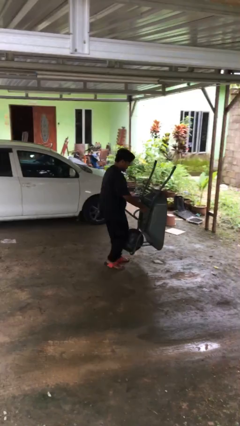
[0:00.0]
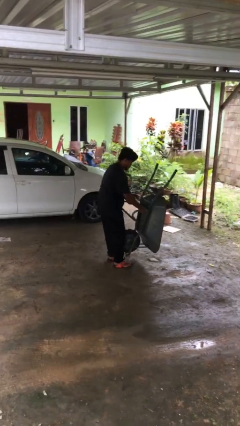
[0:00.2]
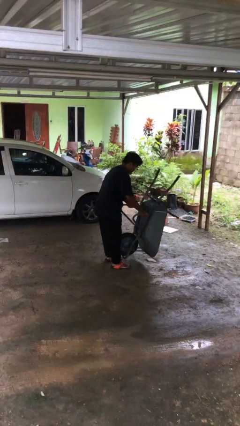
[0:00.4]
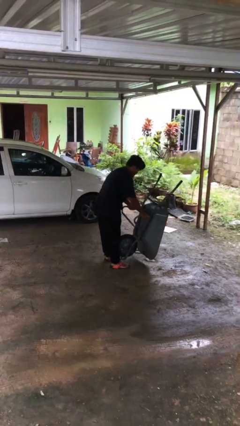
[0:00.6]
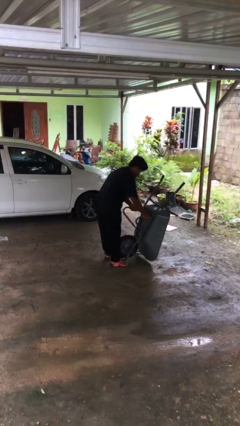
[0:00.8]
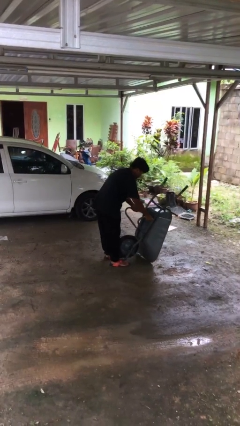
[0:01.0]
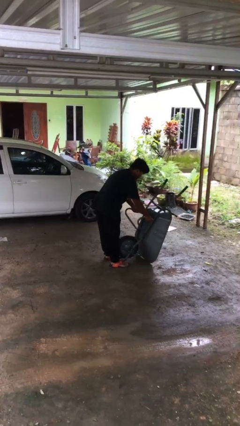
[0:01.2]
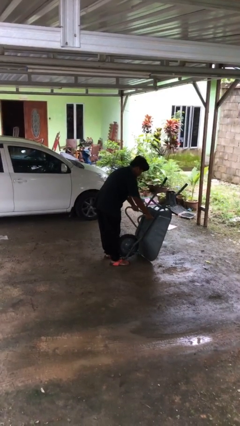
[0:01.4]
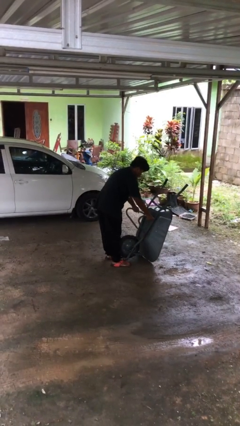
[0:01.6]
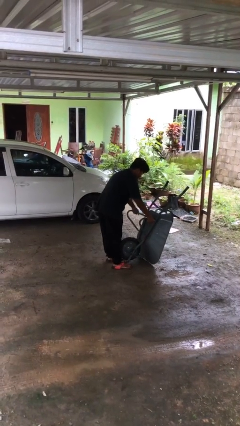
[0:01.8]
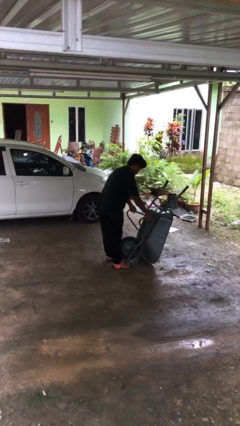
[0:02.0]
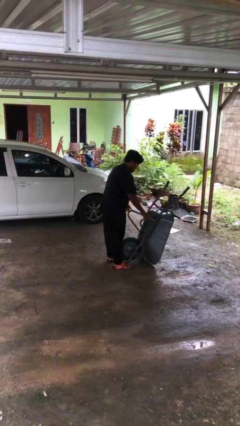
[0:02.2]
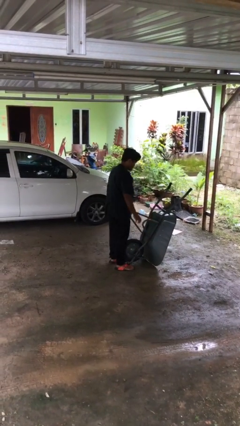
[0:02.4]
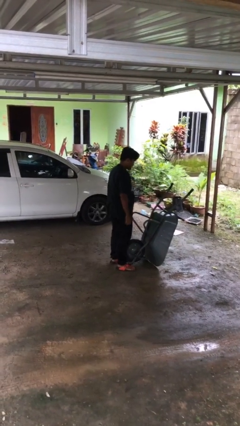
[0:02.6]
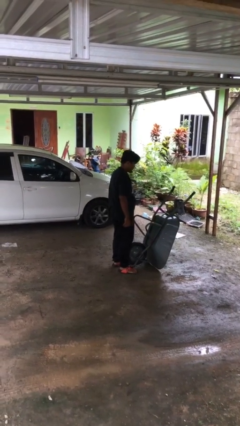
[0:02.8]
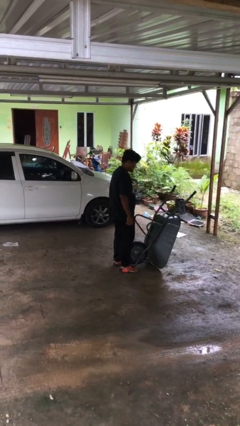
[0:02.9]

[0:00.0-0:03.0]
person puts down object on floor

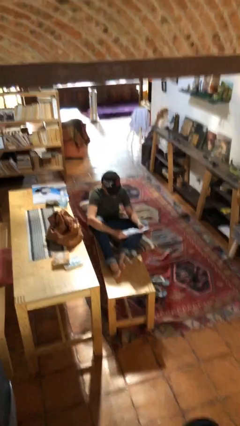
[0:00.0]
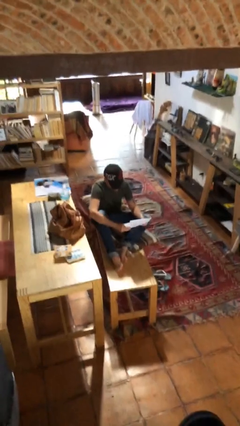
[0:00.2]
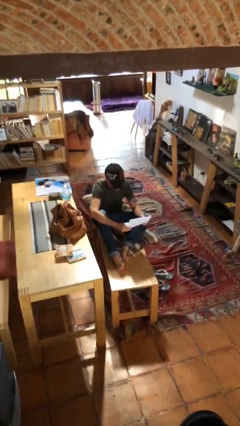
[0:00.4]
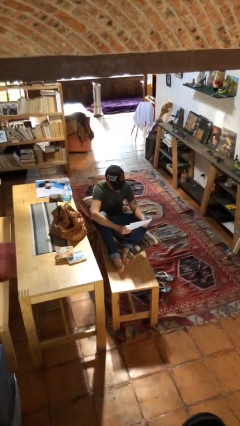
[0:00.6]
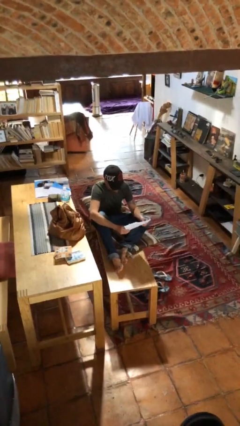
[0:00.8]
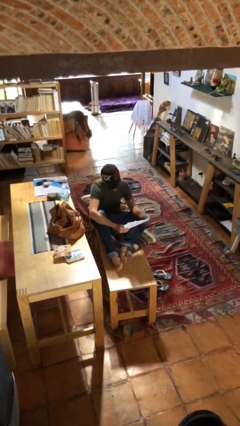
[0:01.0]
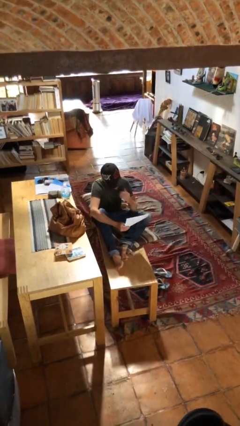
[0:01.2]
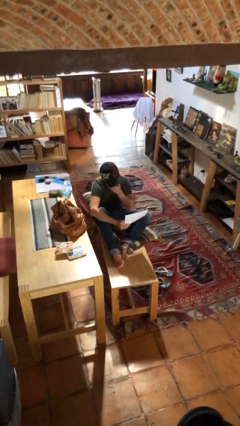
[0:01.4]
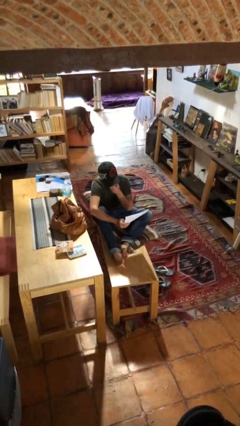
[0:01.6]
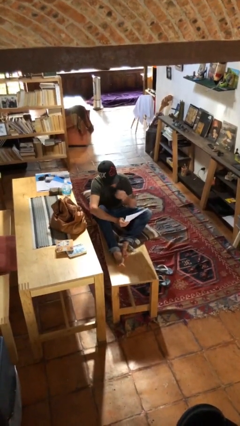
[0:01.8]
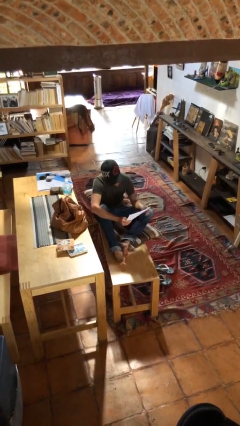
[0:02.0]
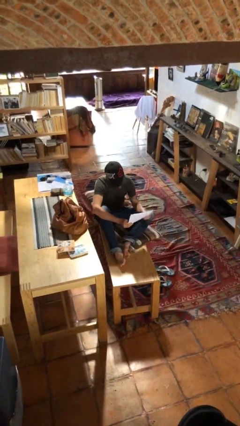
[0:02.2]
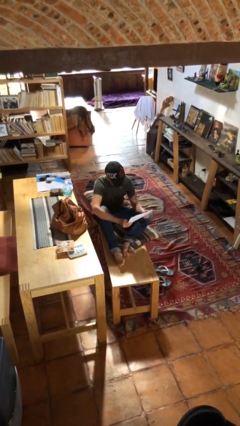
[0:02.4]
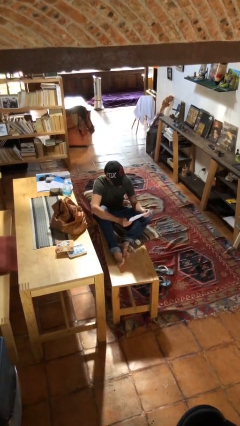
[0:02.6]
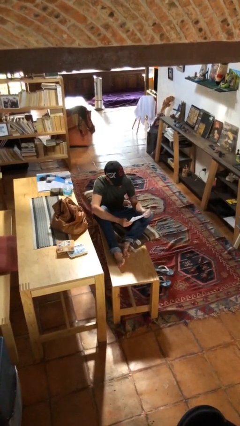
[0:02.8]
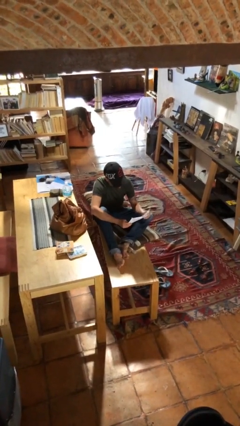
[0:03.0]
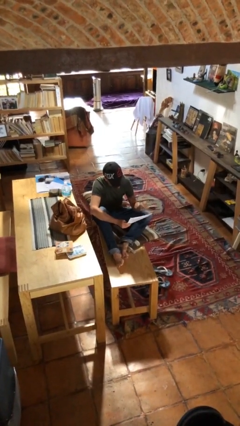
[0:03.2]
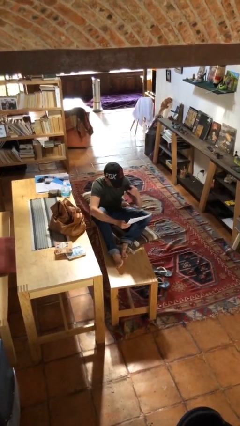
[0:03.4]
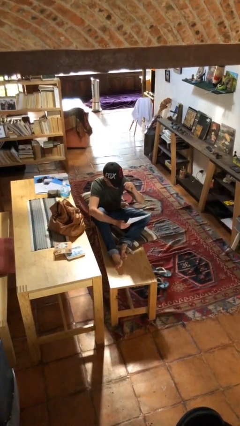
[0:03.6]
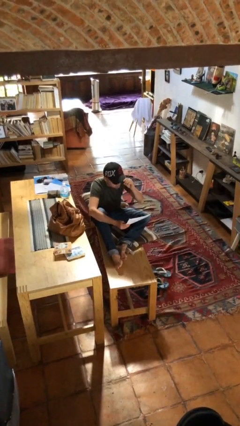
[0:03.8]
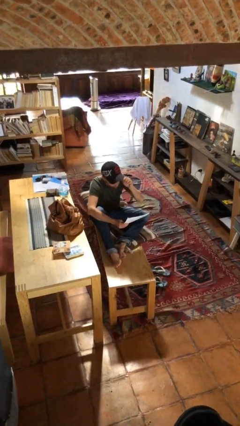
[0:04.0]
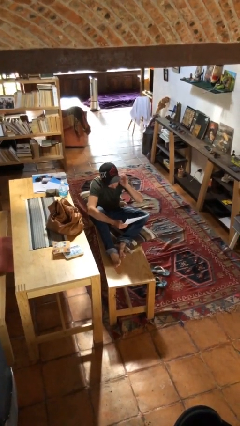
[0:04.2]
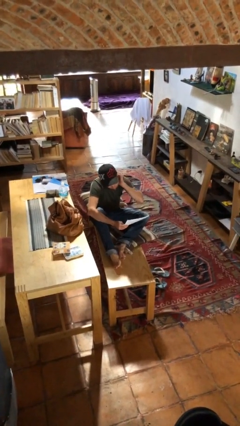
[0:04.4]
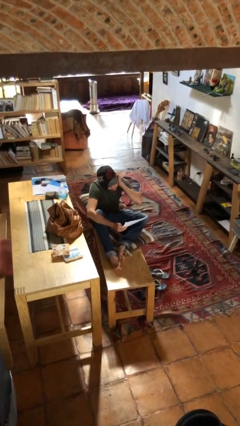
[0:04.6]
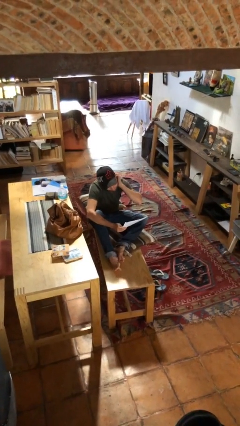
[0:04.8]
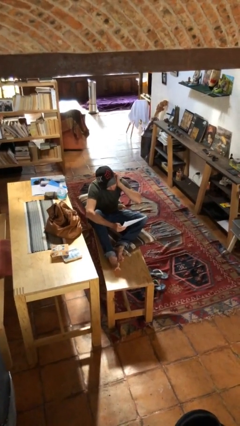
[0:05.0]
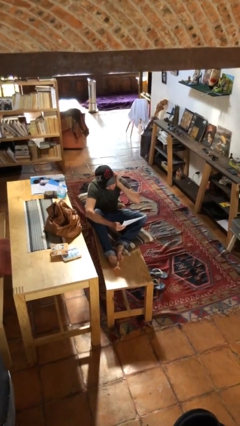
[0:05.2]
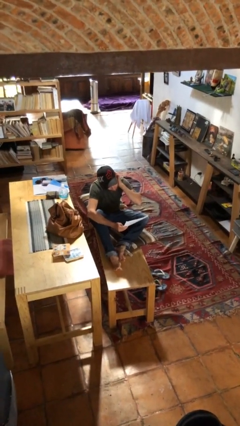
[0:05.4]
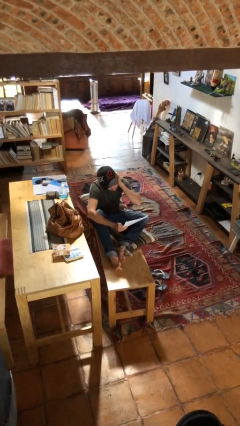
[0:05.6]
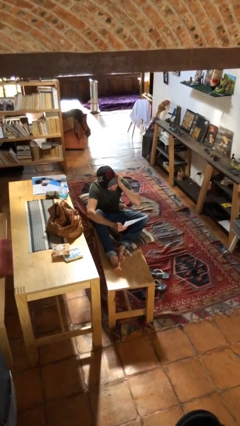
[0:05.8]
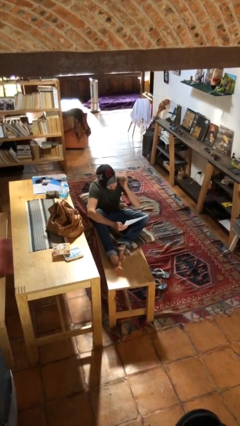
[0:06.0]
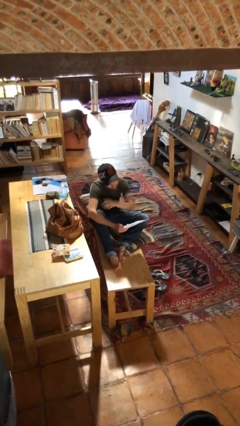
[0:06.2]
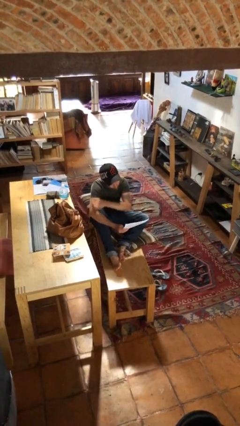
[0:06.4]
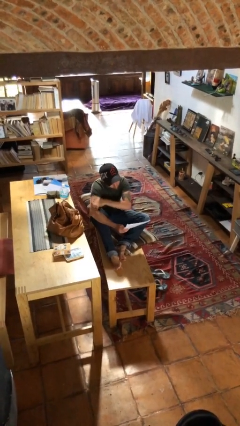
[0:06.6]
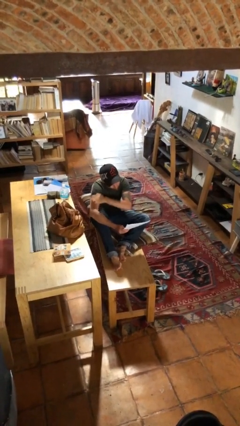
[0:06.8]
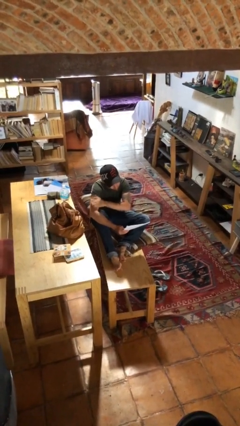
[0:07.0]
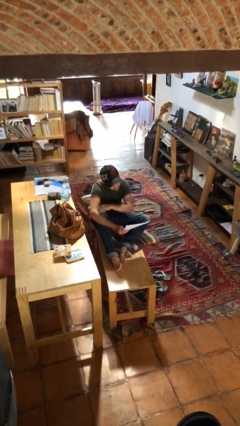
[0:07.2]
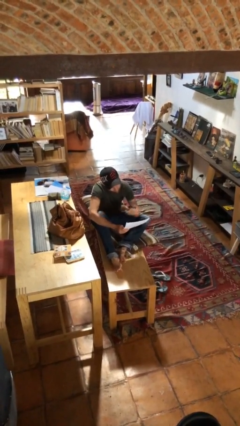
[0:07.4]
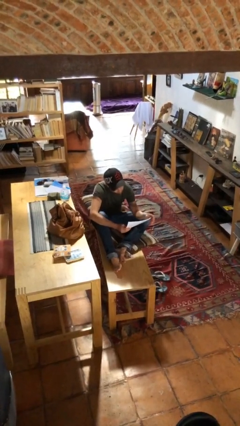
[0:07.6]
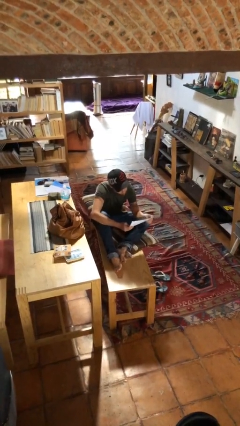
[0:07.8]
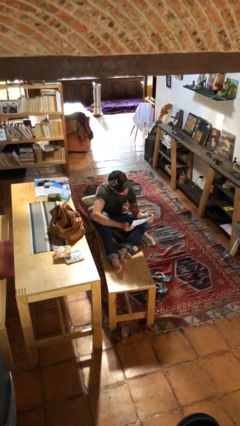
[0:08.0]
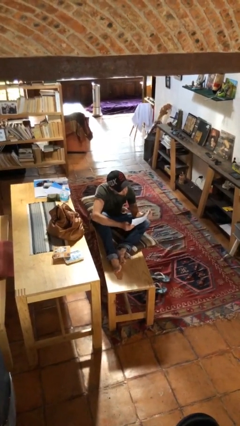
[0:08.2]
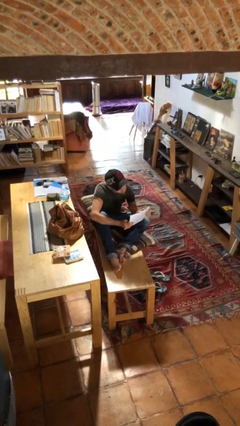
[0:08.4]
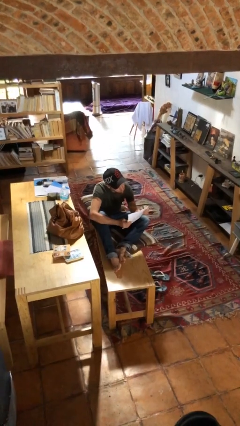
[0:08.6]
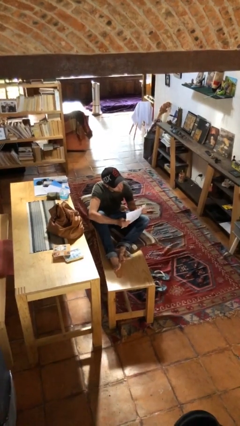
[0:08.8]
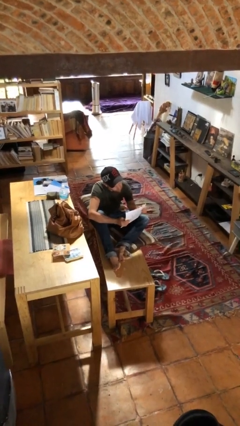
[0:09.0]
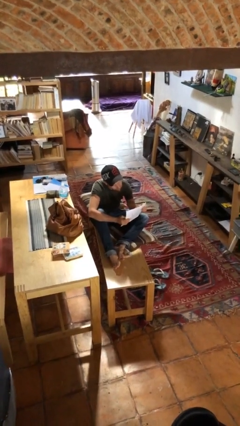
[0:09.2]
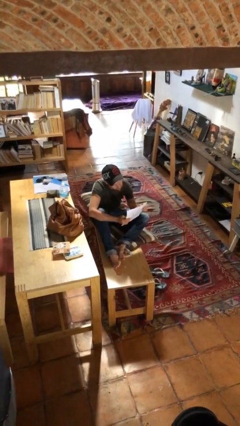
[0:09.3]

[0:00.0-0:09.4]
person reads document

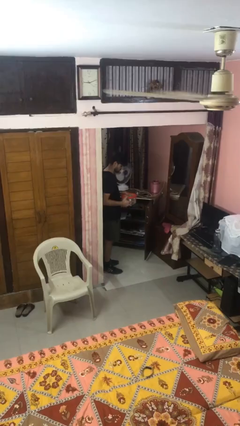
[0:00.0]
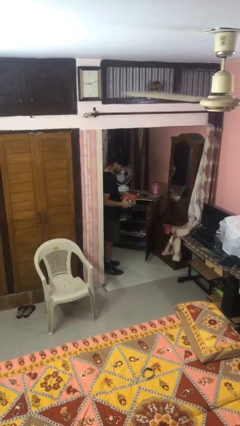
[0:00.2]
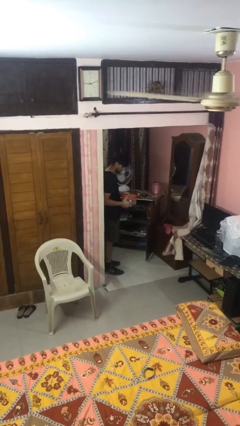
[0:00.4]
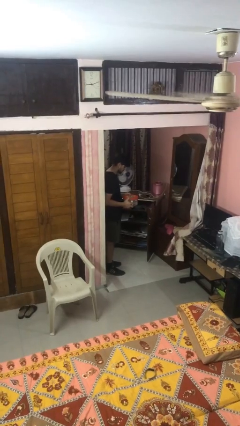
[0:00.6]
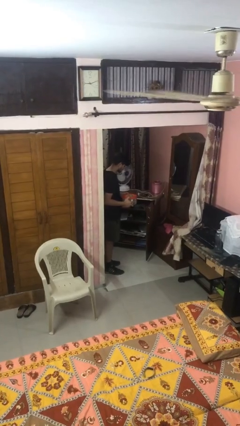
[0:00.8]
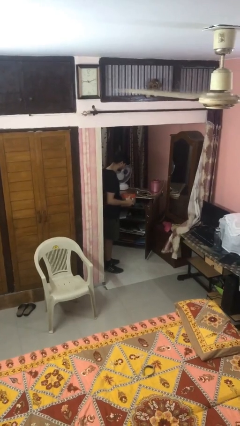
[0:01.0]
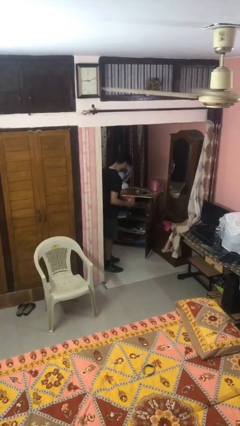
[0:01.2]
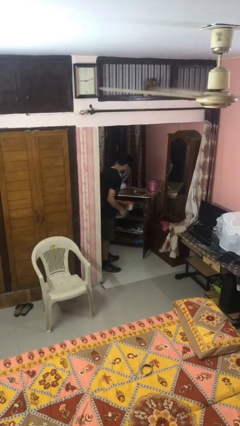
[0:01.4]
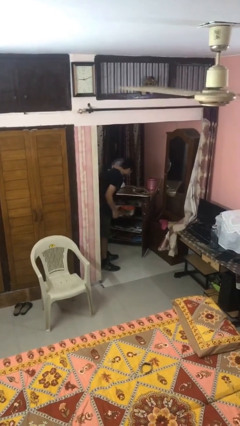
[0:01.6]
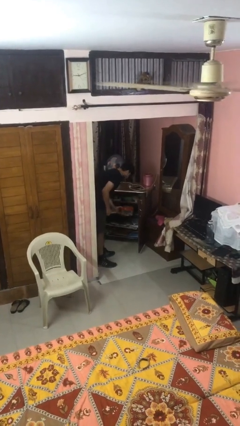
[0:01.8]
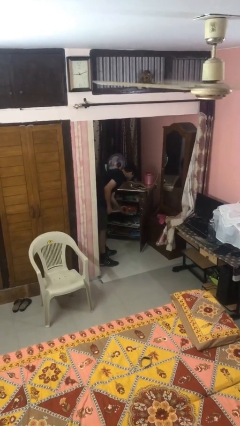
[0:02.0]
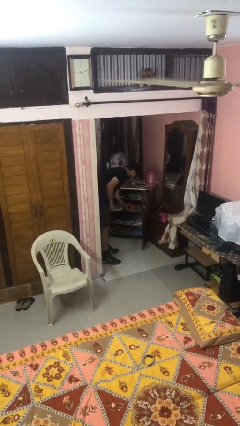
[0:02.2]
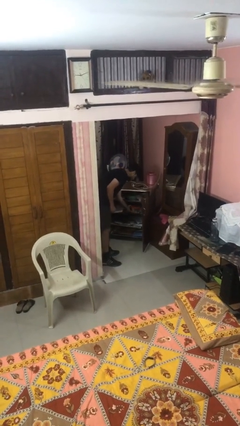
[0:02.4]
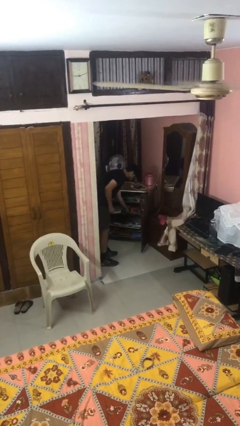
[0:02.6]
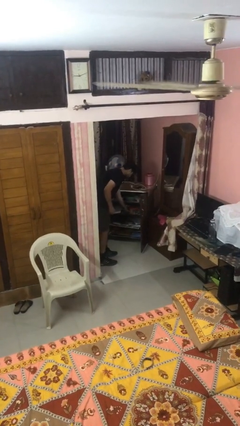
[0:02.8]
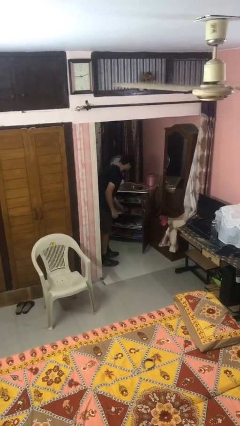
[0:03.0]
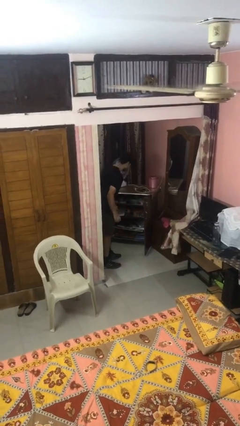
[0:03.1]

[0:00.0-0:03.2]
person puts down object into cabinet

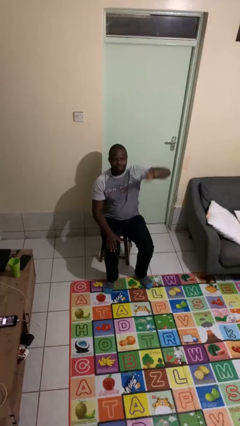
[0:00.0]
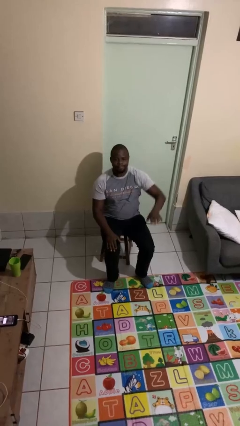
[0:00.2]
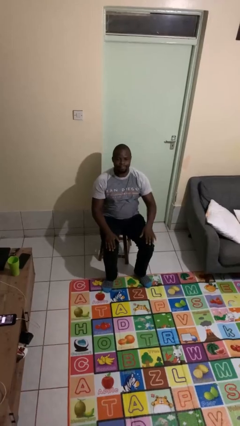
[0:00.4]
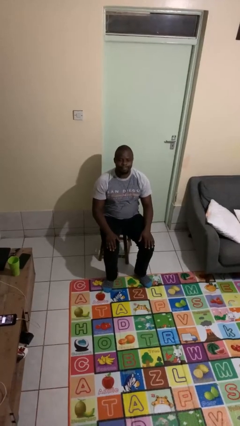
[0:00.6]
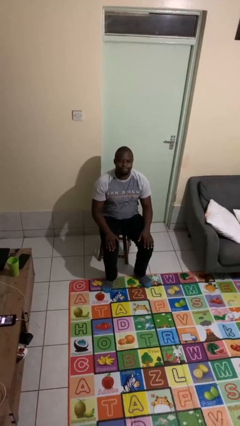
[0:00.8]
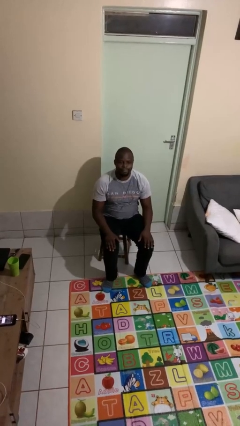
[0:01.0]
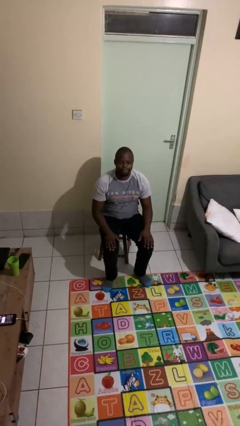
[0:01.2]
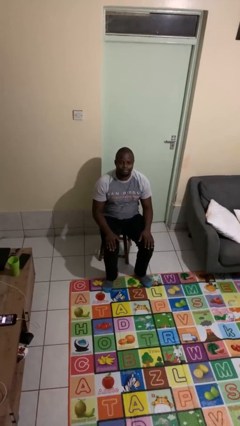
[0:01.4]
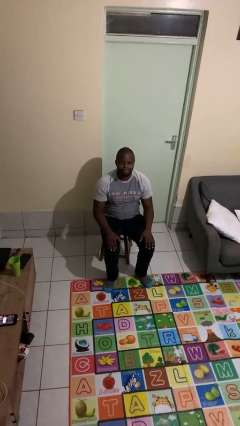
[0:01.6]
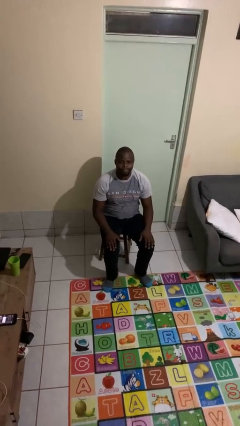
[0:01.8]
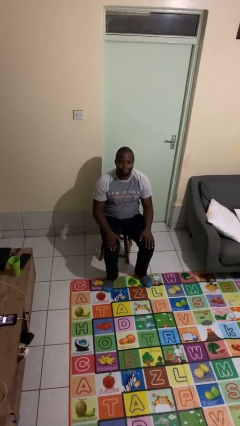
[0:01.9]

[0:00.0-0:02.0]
person gestures lower hand
